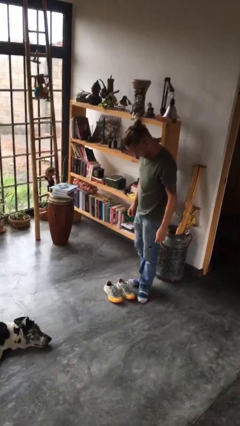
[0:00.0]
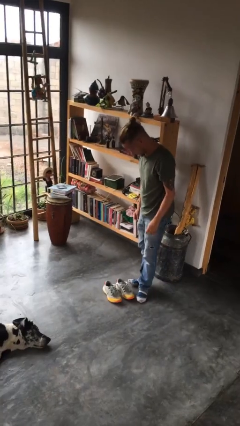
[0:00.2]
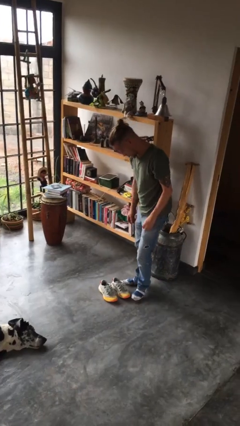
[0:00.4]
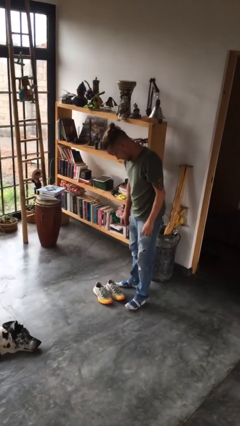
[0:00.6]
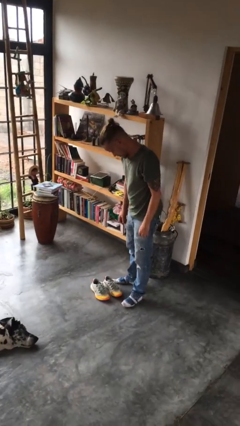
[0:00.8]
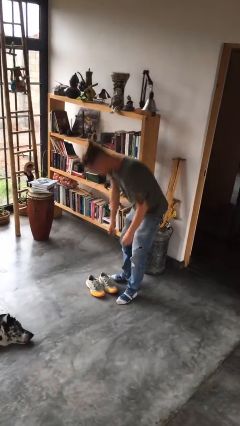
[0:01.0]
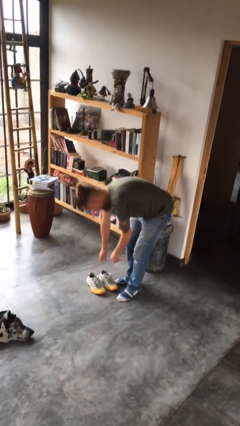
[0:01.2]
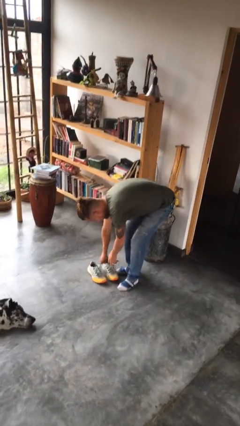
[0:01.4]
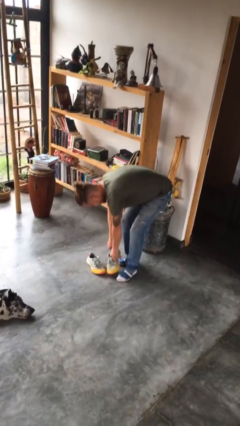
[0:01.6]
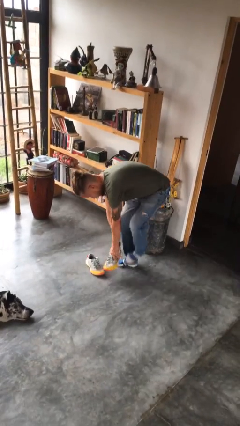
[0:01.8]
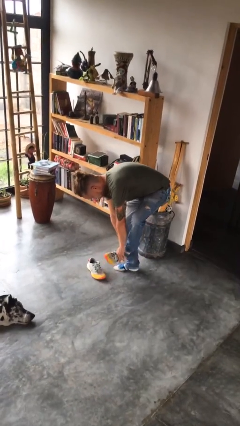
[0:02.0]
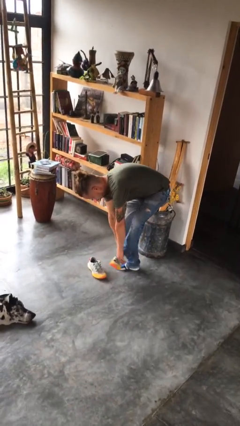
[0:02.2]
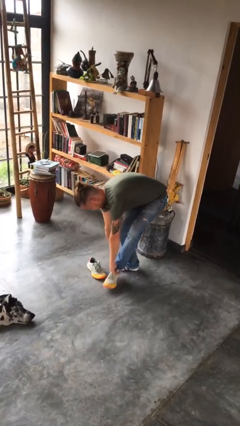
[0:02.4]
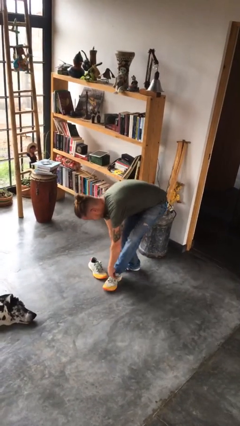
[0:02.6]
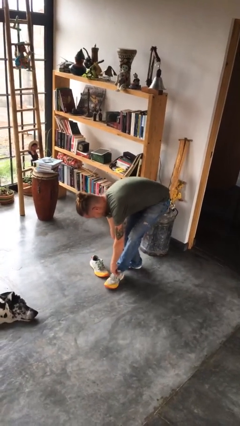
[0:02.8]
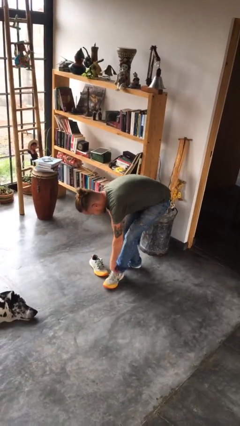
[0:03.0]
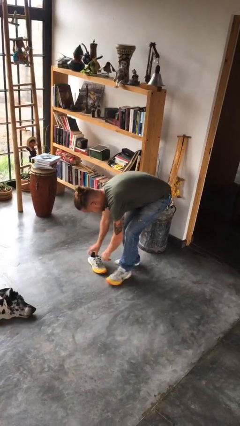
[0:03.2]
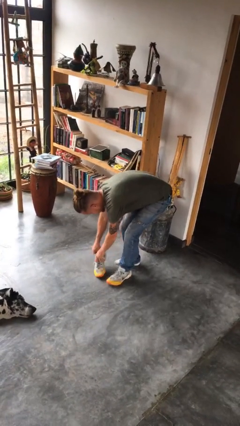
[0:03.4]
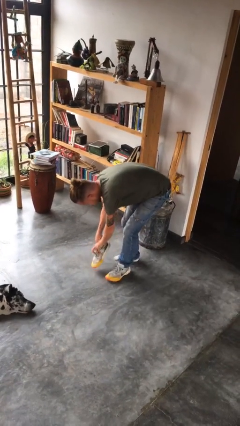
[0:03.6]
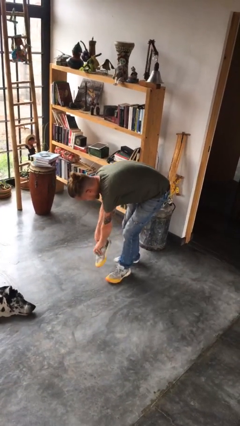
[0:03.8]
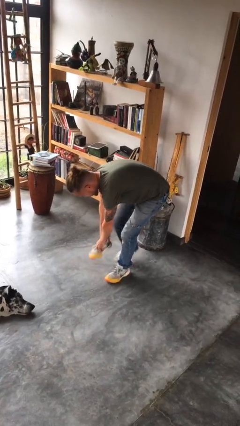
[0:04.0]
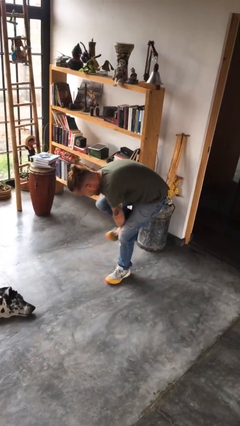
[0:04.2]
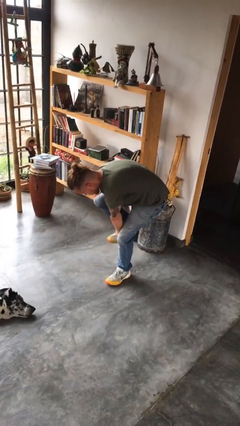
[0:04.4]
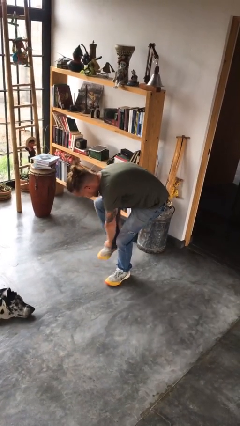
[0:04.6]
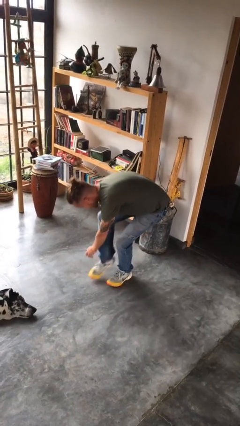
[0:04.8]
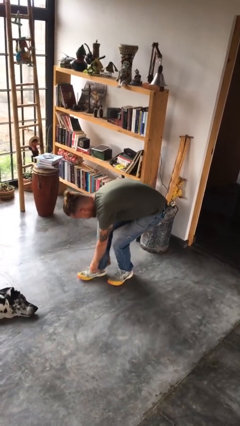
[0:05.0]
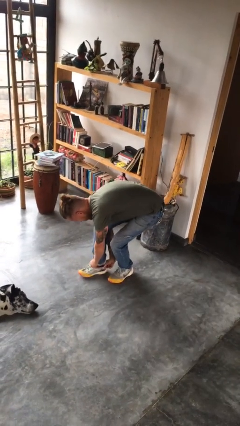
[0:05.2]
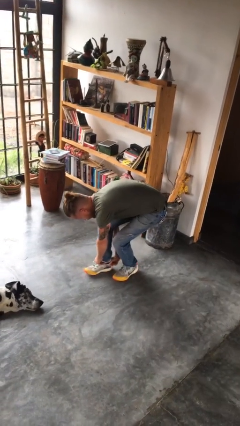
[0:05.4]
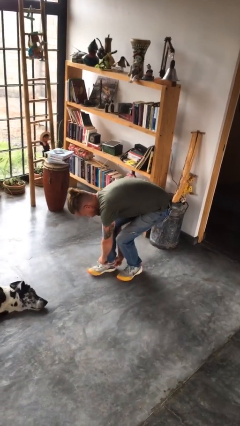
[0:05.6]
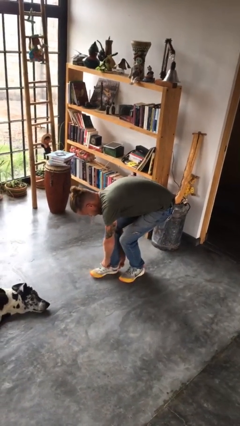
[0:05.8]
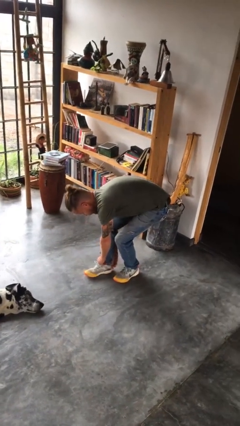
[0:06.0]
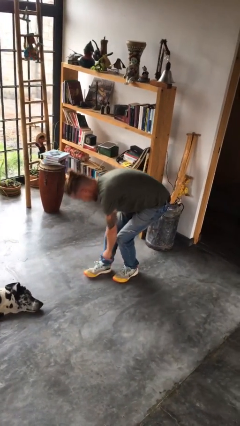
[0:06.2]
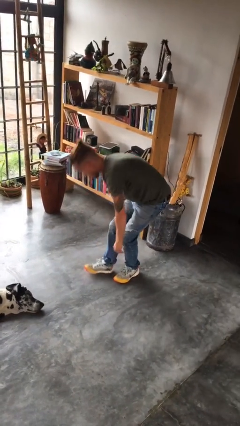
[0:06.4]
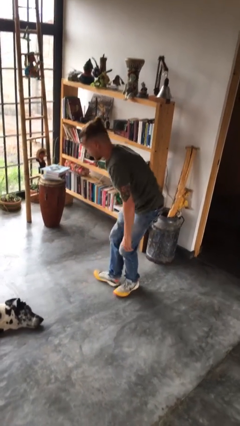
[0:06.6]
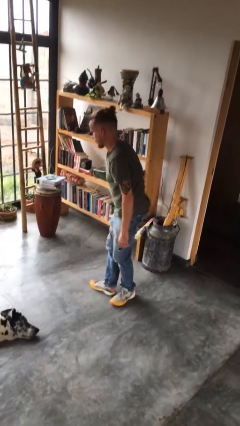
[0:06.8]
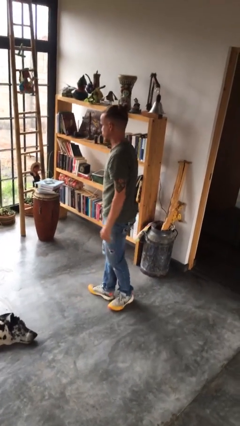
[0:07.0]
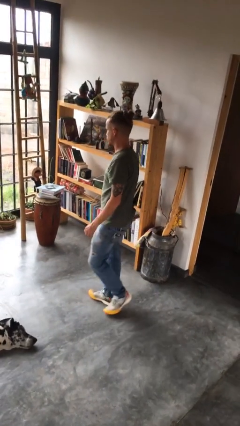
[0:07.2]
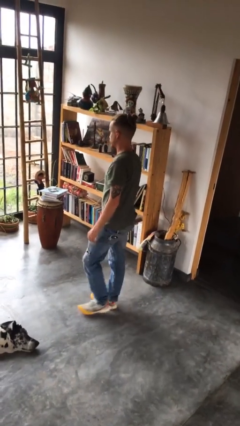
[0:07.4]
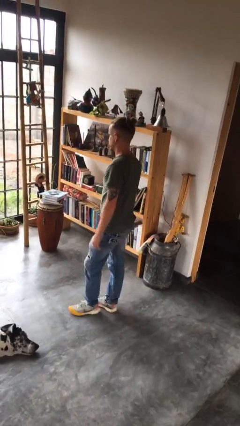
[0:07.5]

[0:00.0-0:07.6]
person puts on shoes

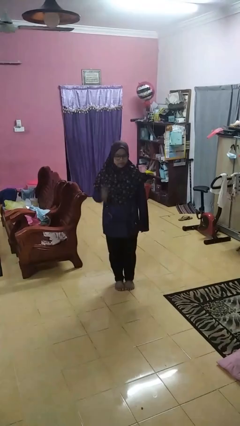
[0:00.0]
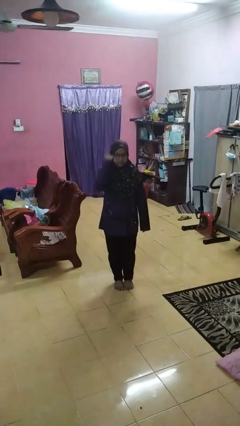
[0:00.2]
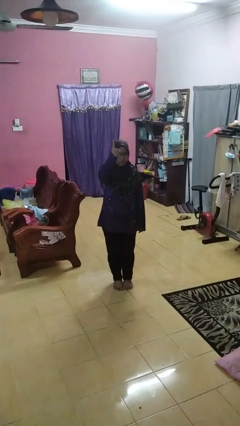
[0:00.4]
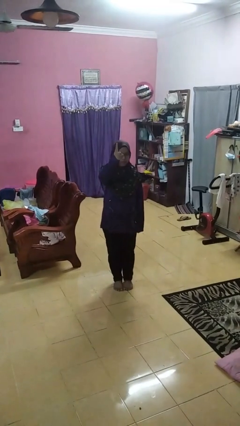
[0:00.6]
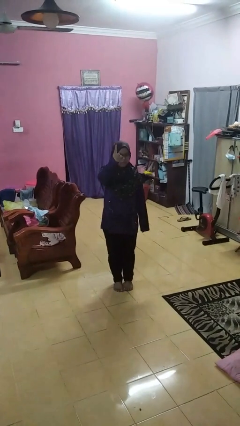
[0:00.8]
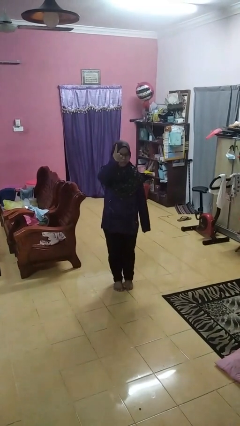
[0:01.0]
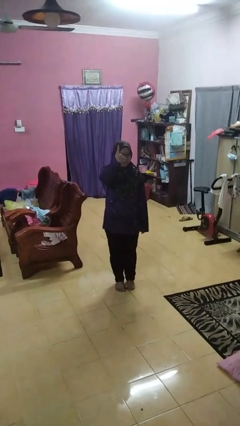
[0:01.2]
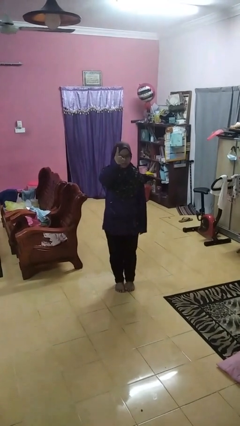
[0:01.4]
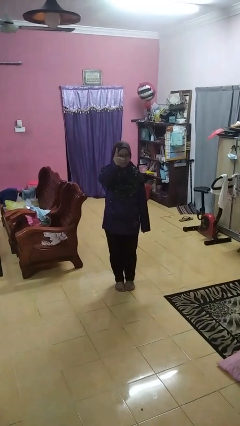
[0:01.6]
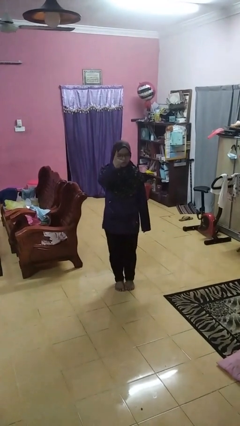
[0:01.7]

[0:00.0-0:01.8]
person gestures number one

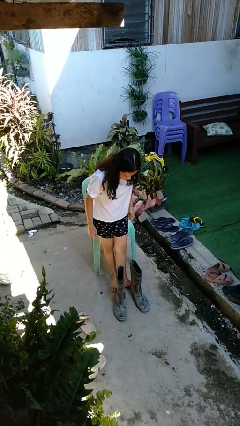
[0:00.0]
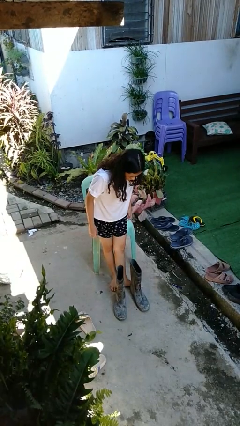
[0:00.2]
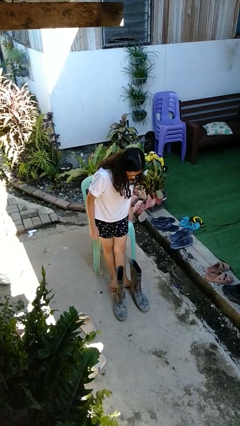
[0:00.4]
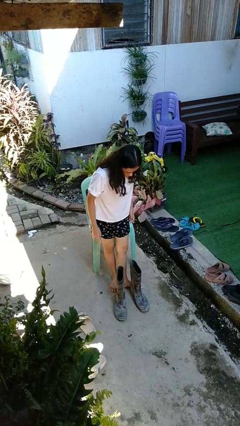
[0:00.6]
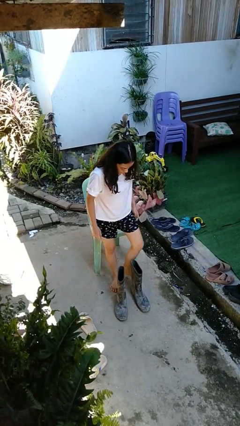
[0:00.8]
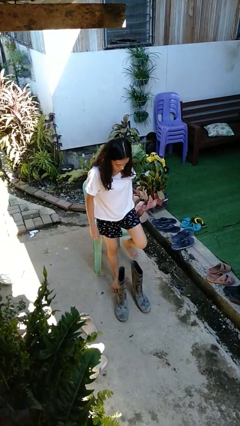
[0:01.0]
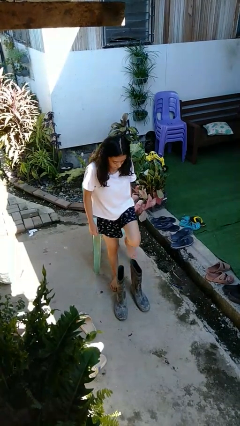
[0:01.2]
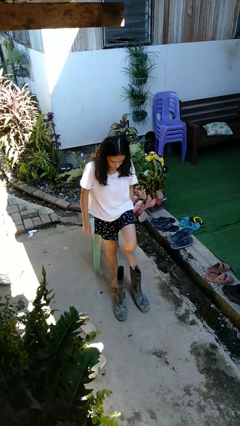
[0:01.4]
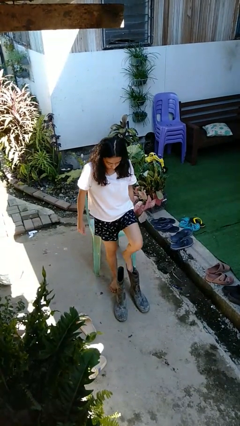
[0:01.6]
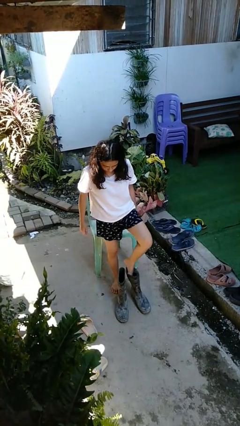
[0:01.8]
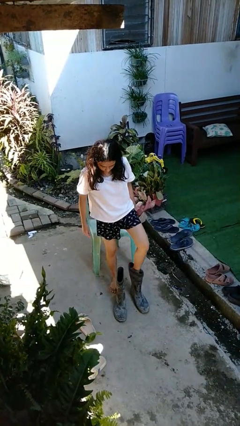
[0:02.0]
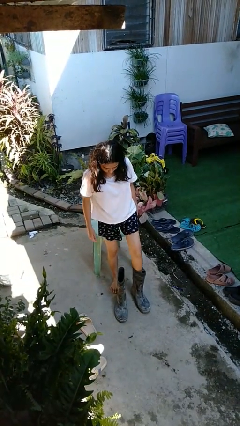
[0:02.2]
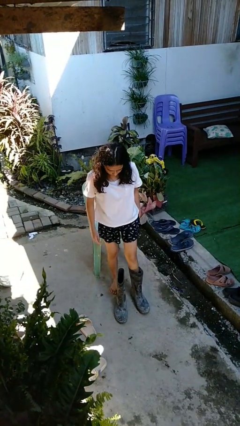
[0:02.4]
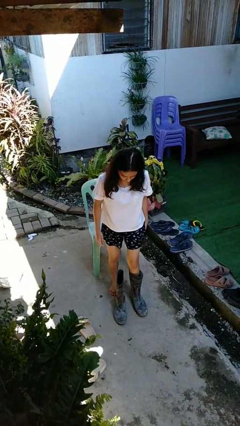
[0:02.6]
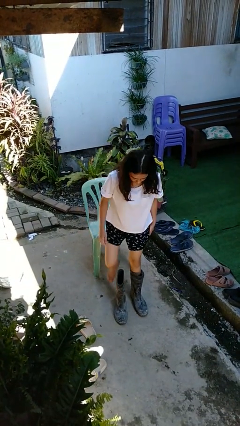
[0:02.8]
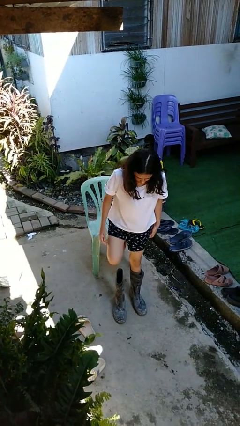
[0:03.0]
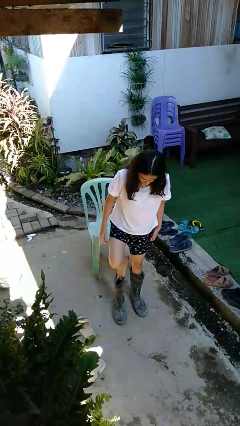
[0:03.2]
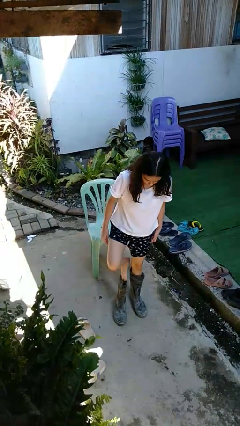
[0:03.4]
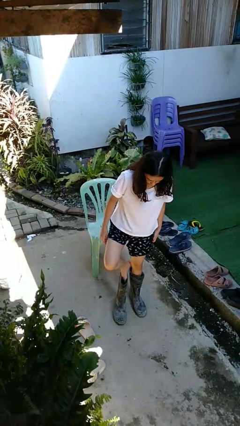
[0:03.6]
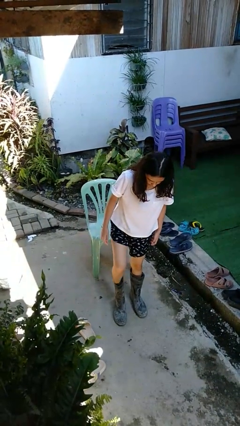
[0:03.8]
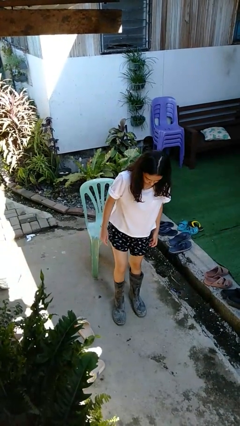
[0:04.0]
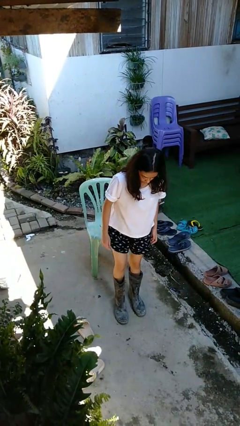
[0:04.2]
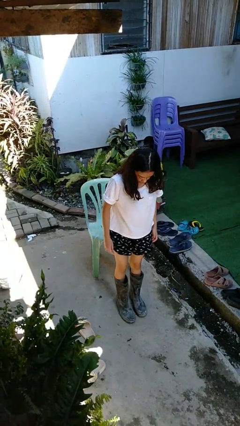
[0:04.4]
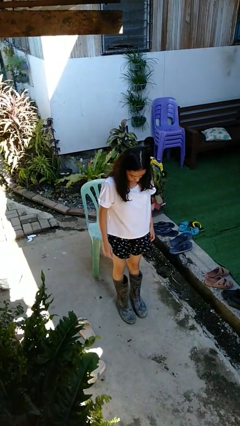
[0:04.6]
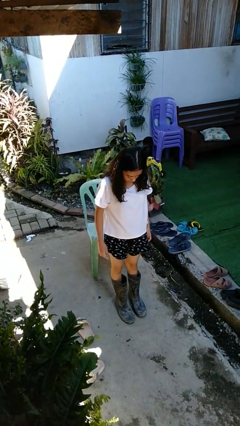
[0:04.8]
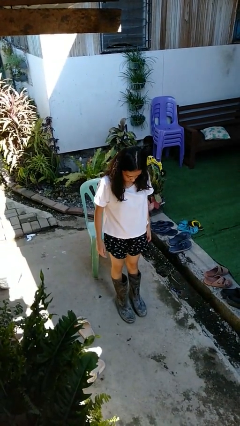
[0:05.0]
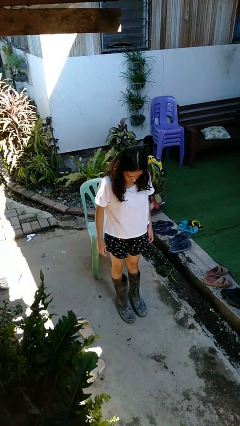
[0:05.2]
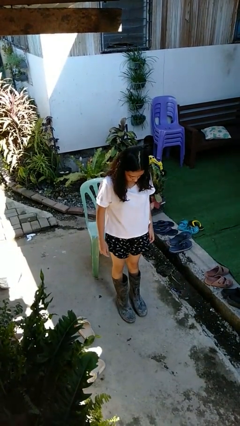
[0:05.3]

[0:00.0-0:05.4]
person puts on boots

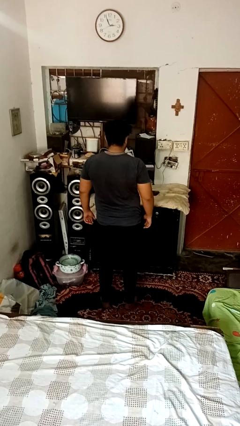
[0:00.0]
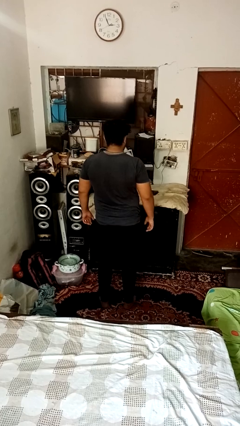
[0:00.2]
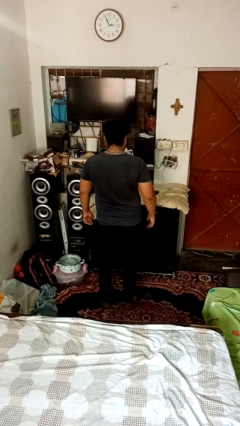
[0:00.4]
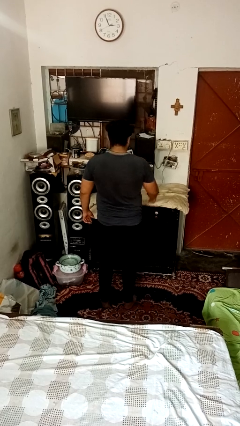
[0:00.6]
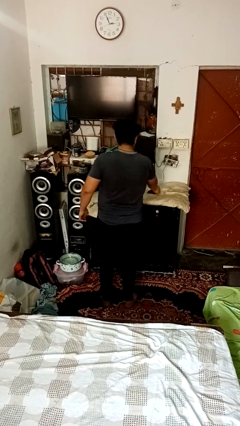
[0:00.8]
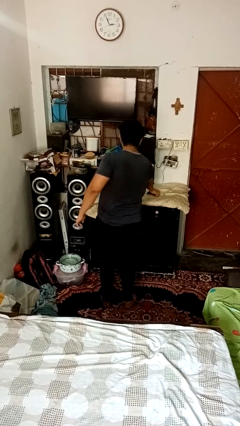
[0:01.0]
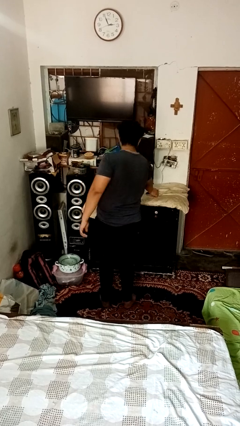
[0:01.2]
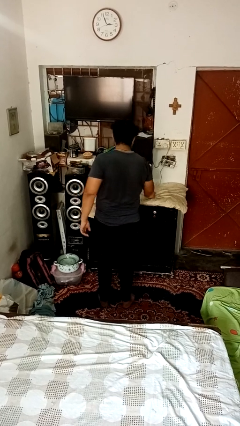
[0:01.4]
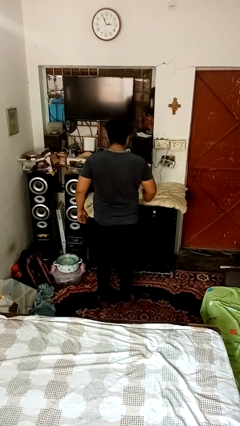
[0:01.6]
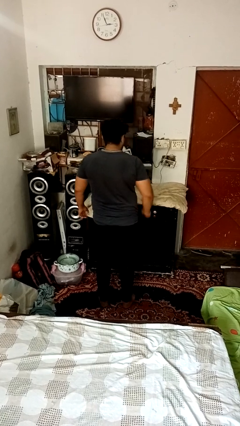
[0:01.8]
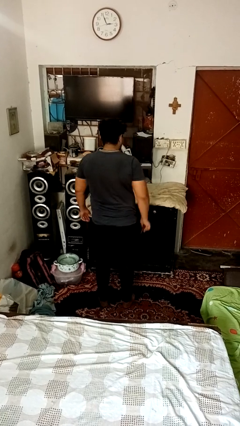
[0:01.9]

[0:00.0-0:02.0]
person picks up object from table

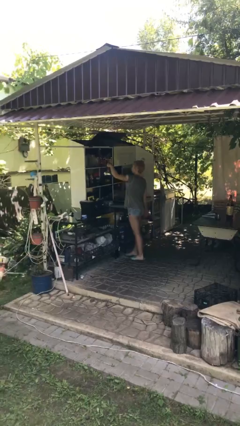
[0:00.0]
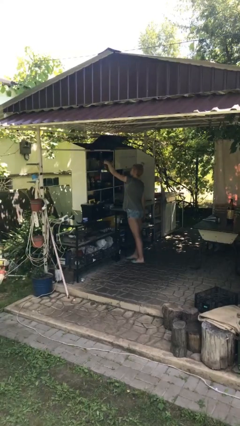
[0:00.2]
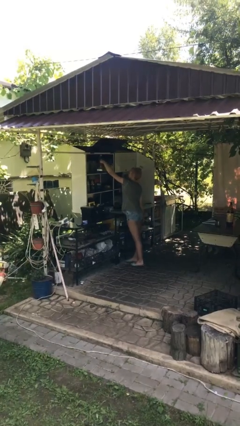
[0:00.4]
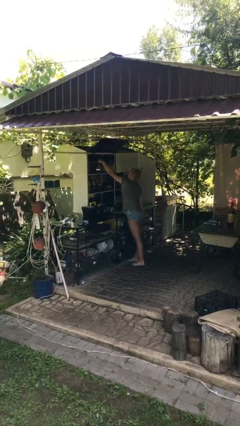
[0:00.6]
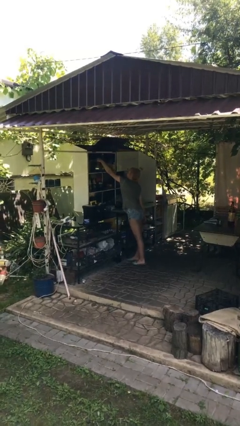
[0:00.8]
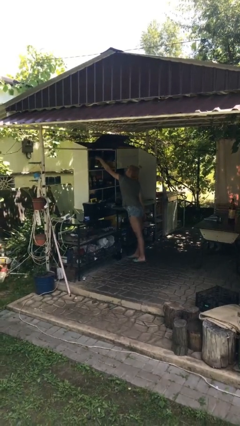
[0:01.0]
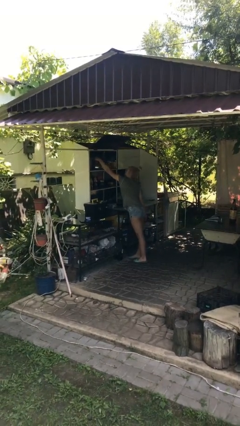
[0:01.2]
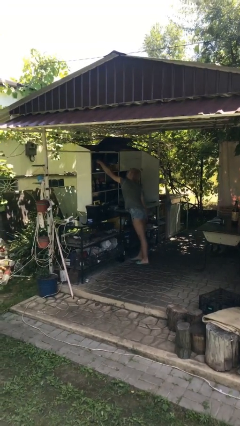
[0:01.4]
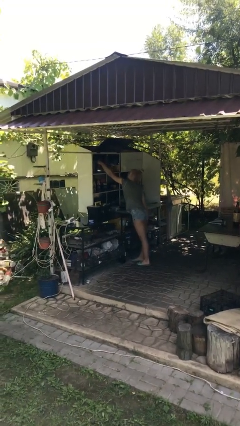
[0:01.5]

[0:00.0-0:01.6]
person puts down object on shelf
